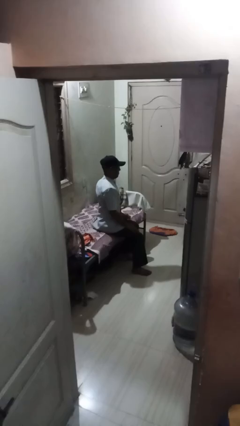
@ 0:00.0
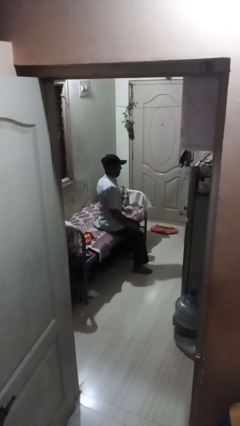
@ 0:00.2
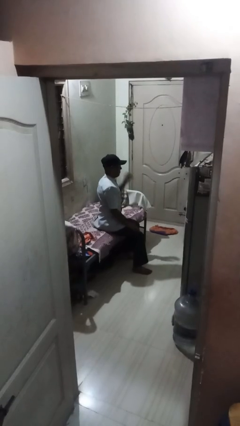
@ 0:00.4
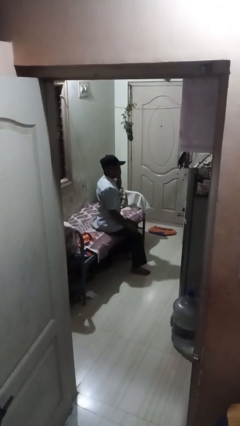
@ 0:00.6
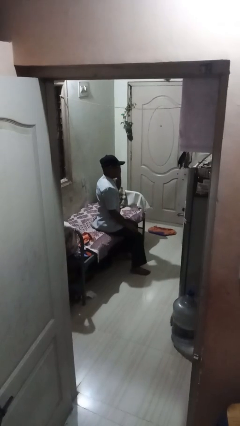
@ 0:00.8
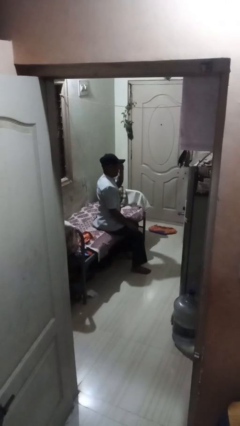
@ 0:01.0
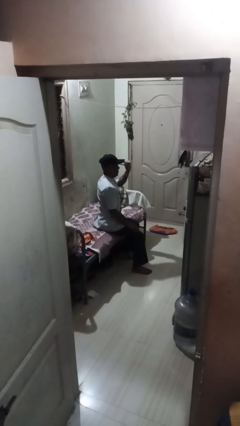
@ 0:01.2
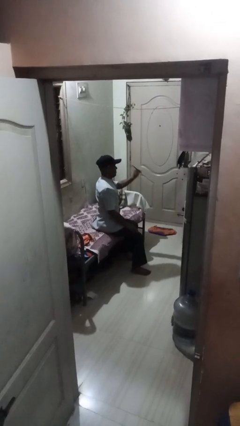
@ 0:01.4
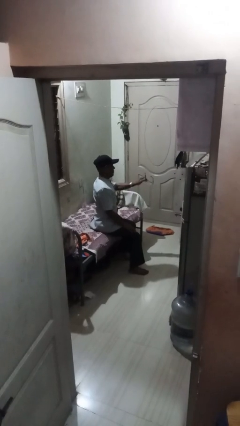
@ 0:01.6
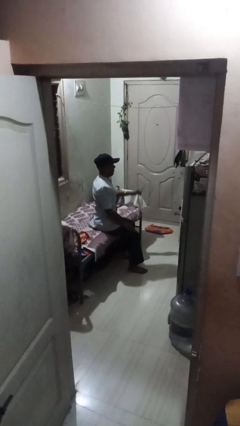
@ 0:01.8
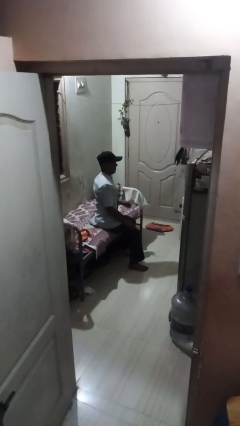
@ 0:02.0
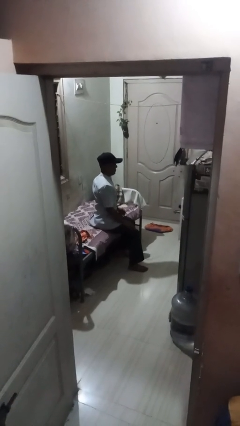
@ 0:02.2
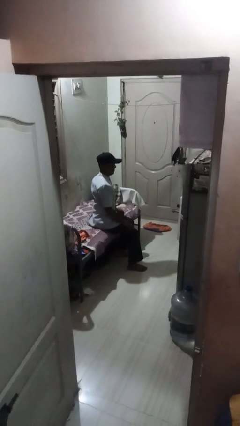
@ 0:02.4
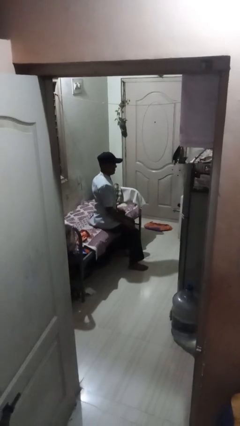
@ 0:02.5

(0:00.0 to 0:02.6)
person takes off glasses

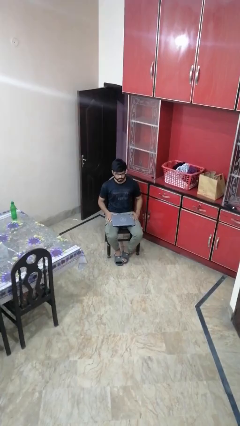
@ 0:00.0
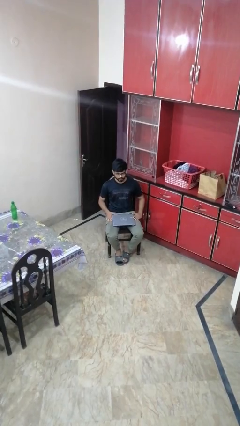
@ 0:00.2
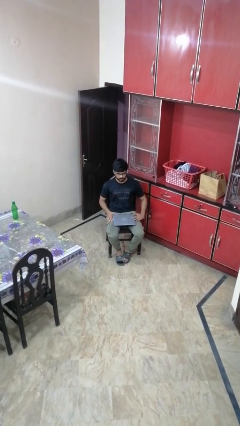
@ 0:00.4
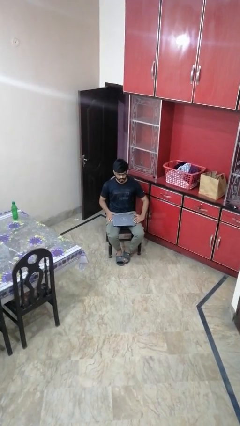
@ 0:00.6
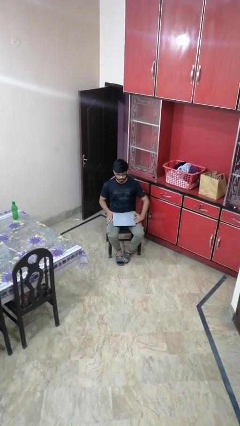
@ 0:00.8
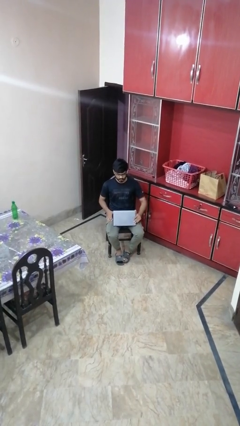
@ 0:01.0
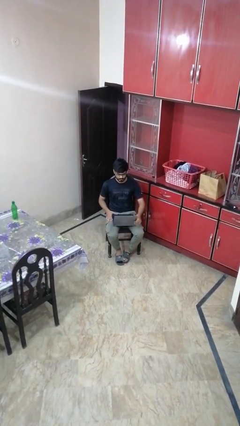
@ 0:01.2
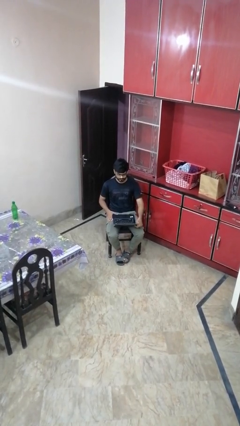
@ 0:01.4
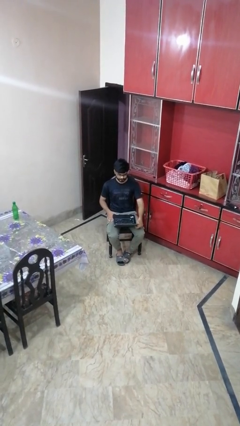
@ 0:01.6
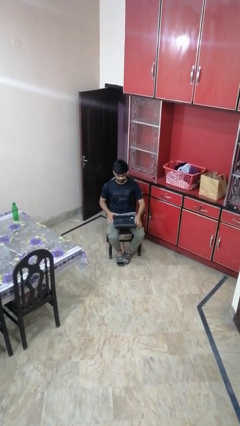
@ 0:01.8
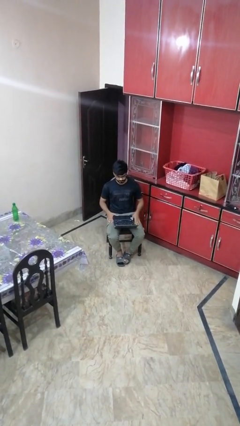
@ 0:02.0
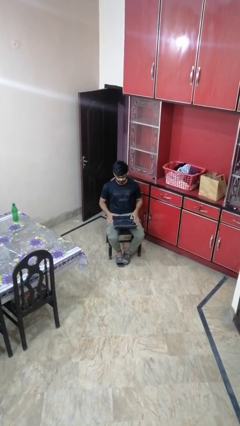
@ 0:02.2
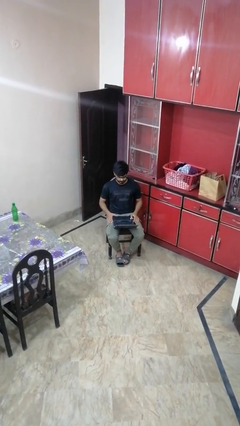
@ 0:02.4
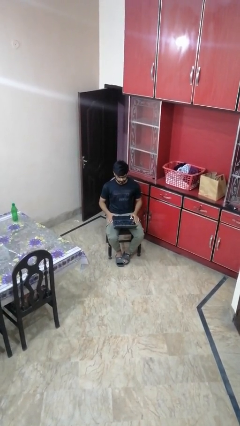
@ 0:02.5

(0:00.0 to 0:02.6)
person opens laptop

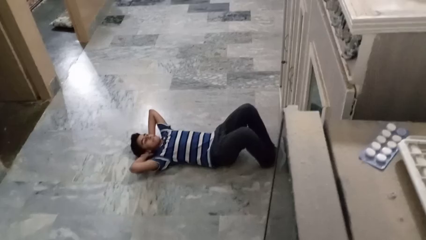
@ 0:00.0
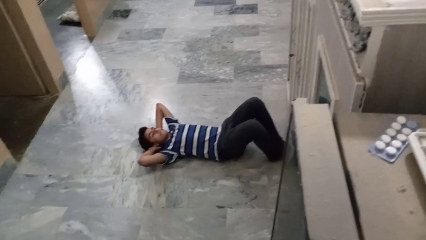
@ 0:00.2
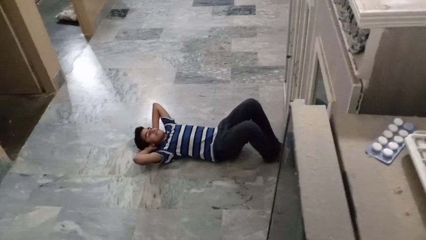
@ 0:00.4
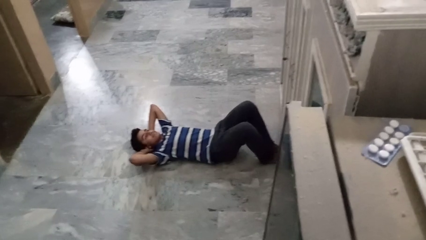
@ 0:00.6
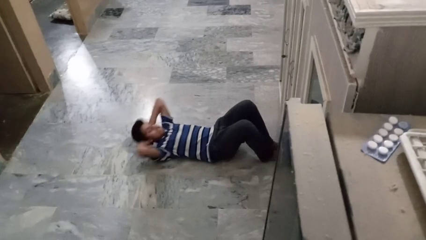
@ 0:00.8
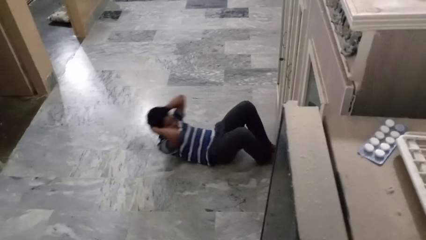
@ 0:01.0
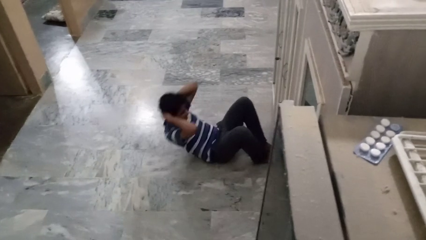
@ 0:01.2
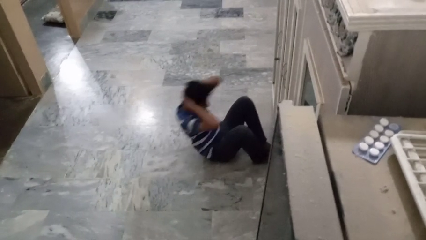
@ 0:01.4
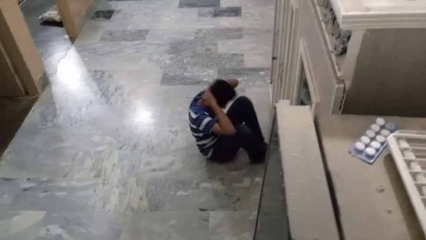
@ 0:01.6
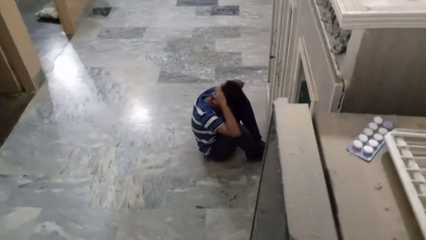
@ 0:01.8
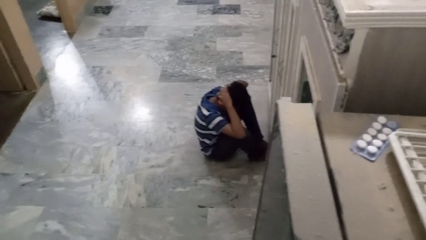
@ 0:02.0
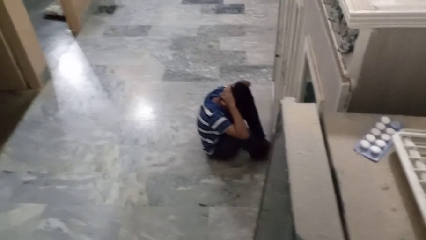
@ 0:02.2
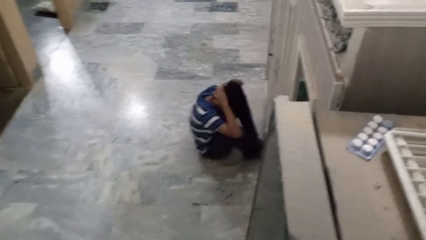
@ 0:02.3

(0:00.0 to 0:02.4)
person exercises with situp

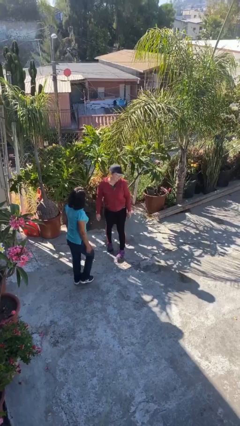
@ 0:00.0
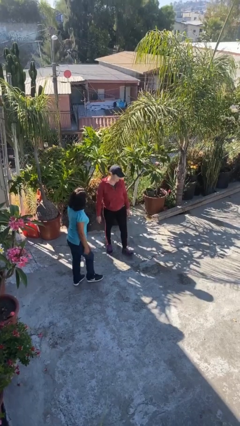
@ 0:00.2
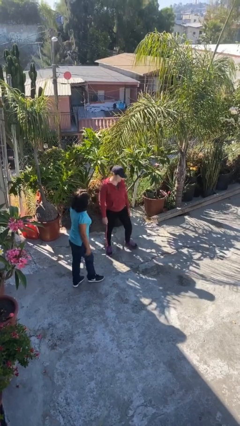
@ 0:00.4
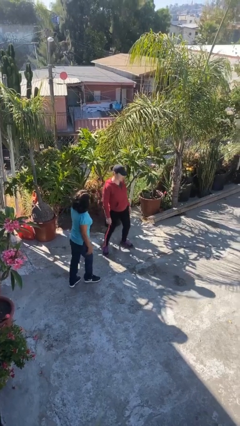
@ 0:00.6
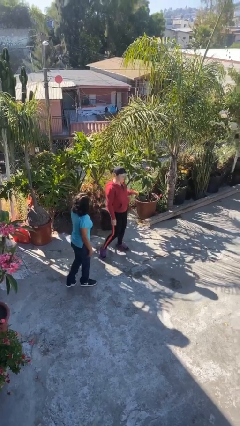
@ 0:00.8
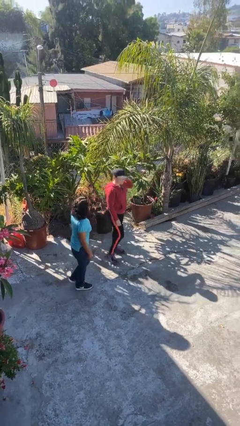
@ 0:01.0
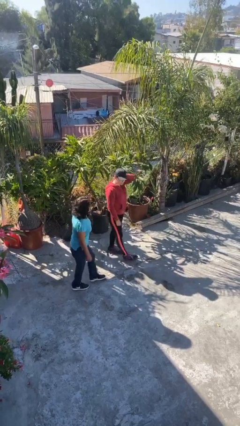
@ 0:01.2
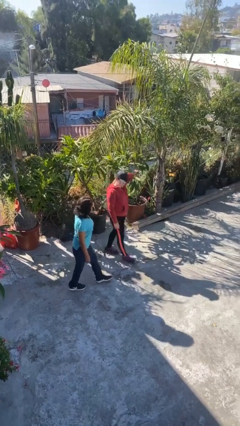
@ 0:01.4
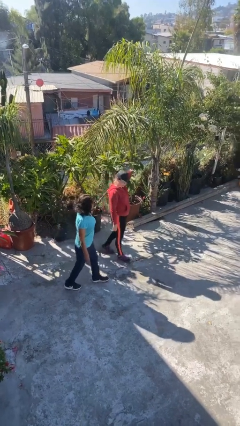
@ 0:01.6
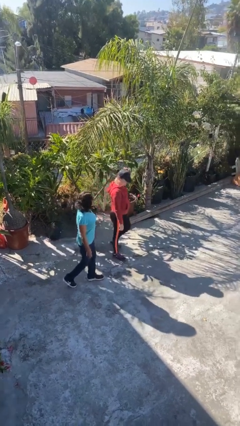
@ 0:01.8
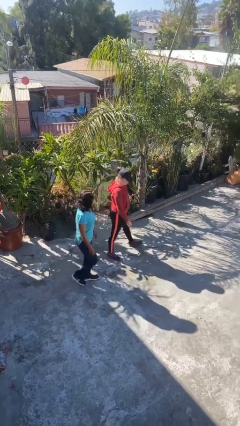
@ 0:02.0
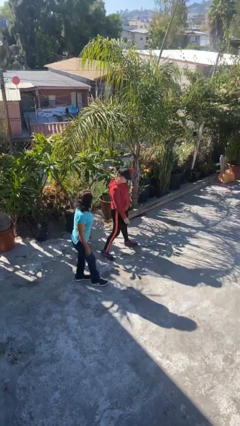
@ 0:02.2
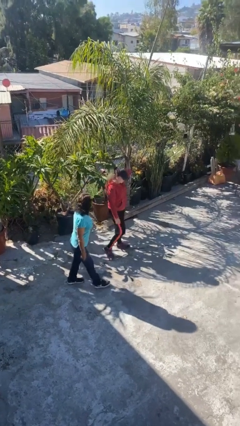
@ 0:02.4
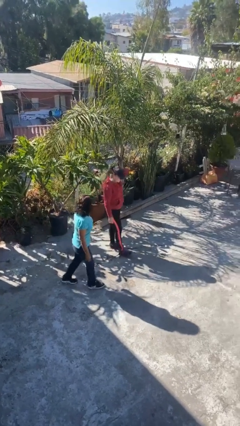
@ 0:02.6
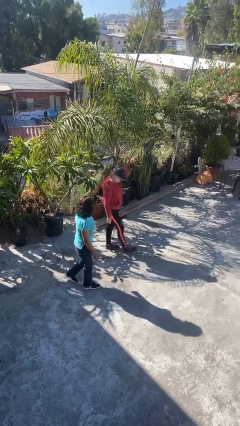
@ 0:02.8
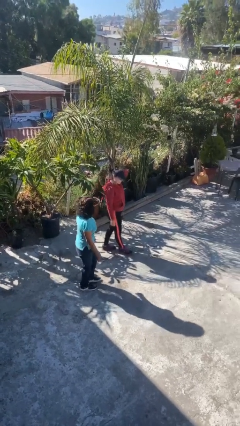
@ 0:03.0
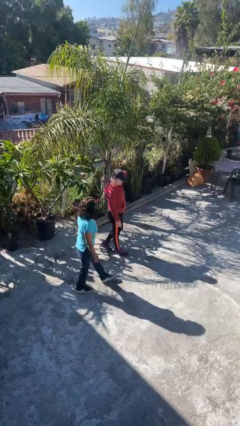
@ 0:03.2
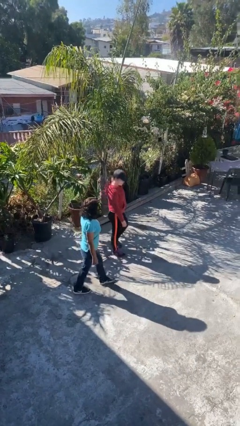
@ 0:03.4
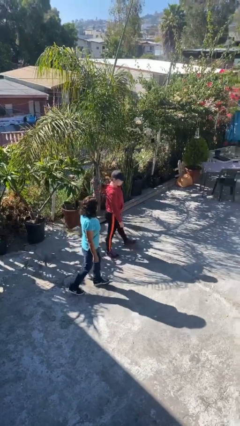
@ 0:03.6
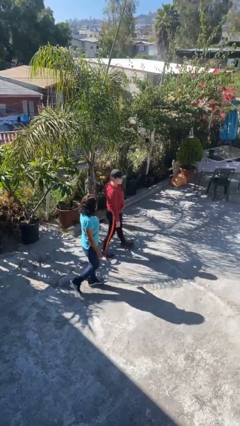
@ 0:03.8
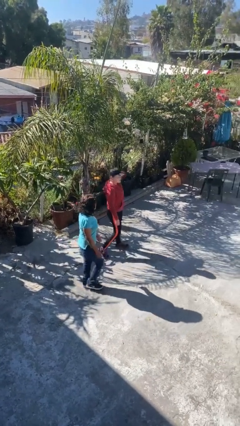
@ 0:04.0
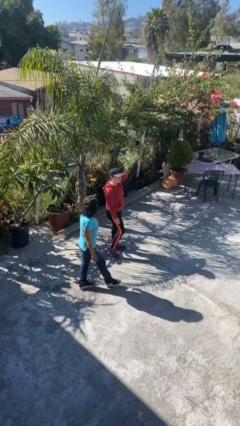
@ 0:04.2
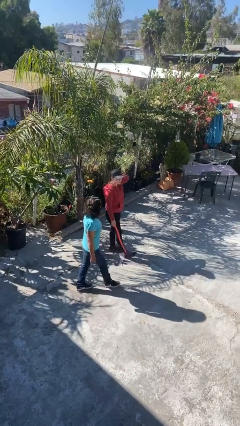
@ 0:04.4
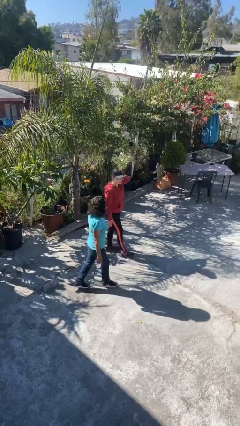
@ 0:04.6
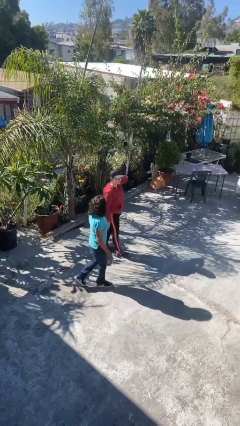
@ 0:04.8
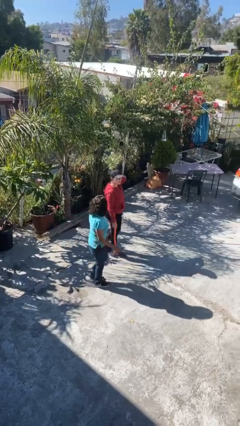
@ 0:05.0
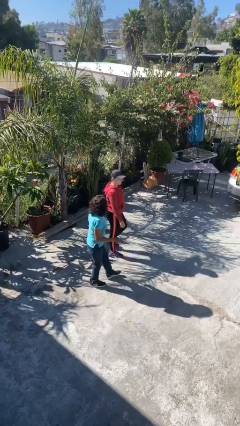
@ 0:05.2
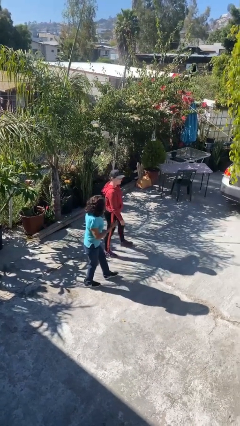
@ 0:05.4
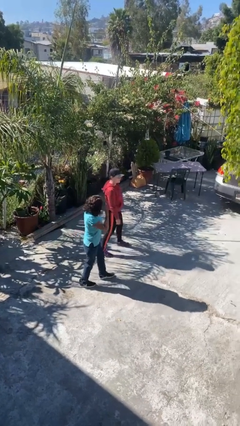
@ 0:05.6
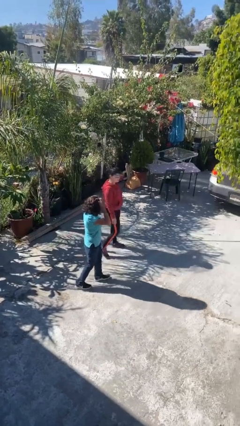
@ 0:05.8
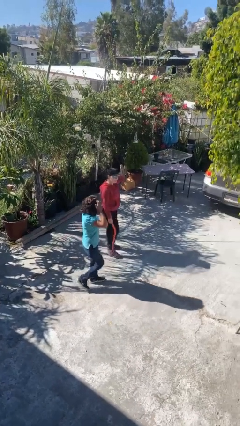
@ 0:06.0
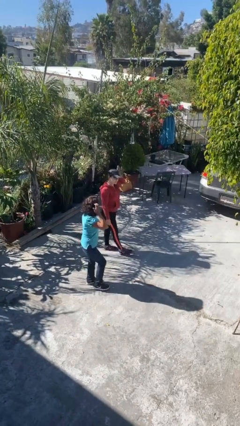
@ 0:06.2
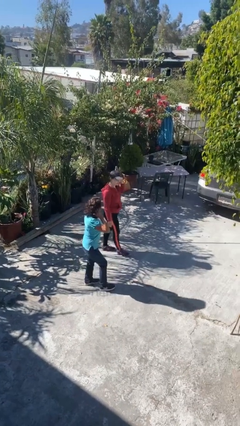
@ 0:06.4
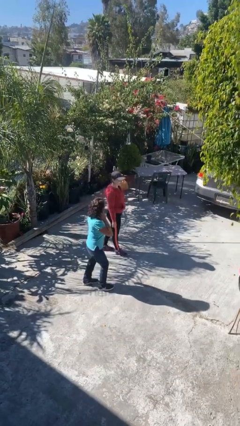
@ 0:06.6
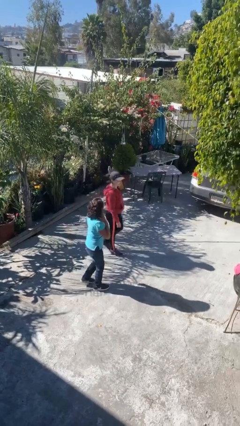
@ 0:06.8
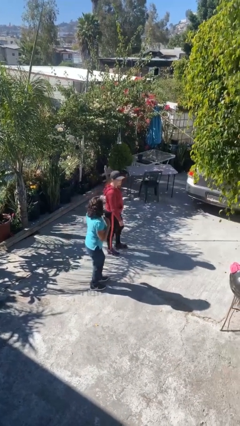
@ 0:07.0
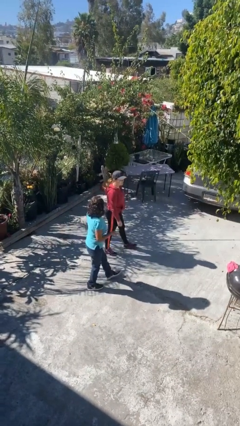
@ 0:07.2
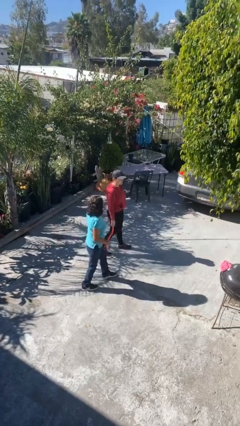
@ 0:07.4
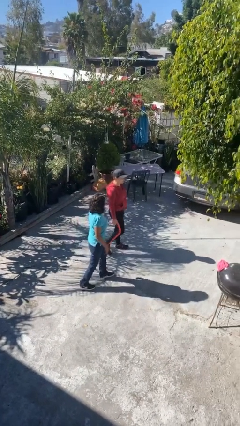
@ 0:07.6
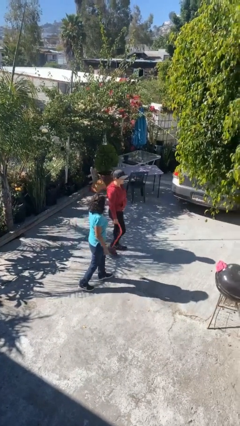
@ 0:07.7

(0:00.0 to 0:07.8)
person talks to person

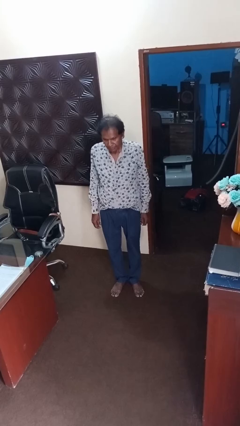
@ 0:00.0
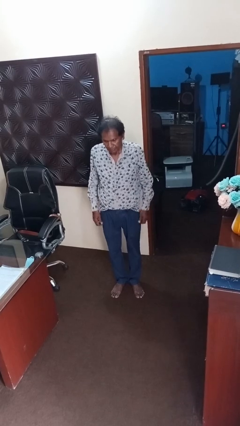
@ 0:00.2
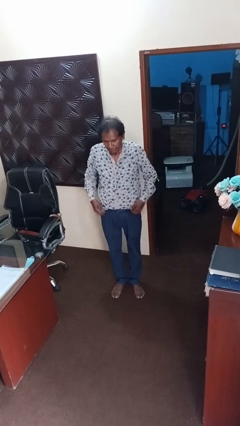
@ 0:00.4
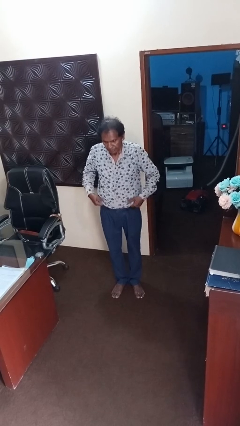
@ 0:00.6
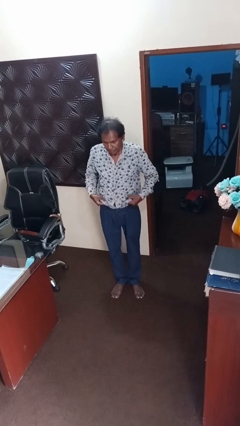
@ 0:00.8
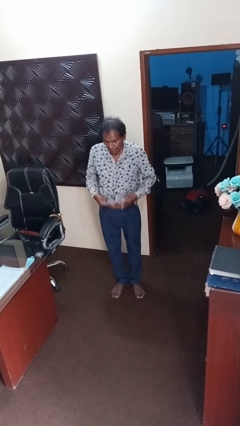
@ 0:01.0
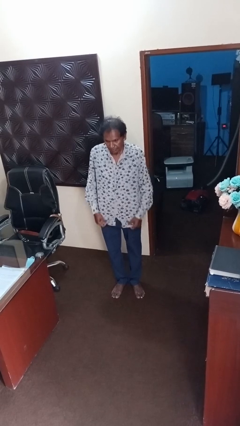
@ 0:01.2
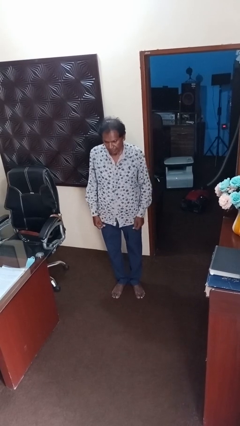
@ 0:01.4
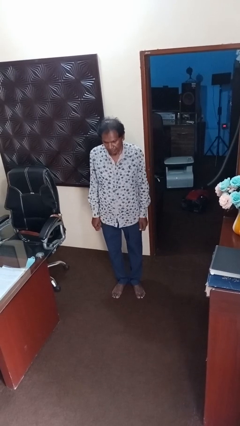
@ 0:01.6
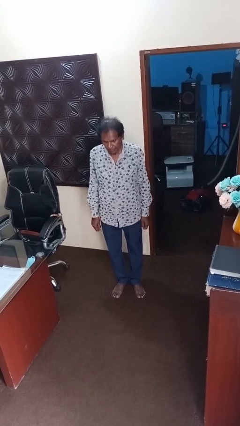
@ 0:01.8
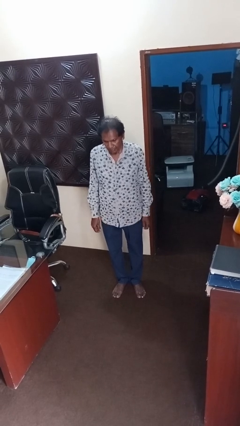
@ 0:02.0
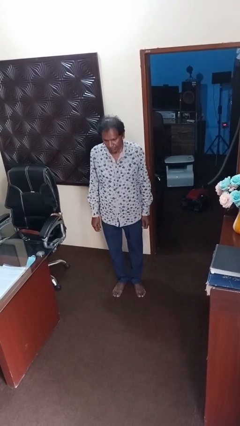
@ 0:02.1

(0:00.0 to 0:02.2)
person untucks shirt
